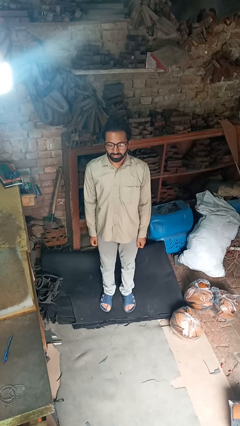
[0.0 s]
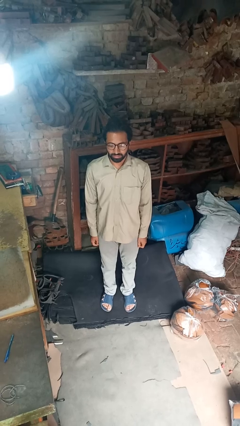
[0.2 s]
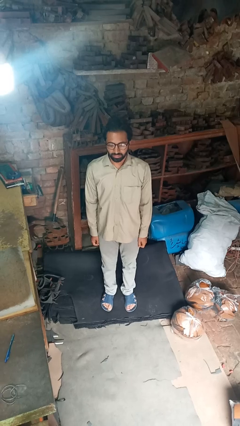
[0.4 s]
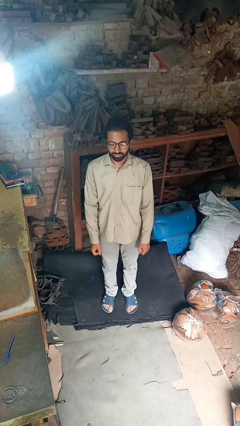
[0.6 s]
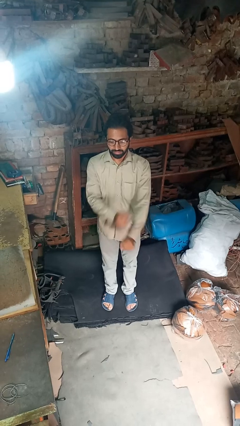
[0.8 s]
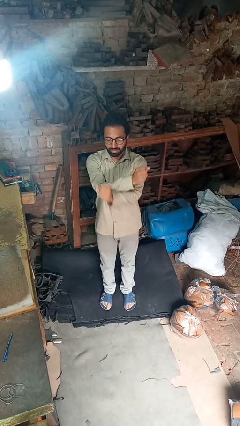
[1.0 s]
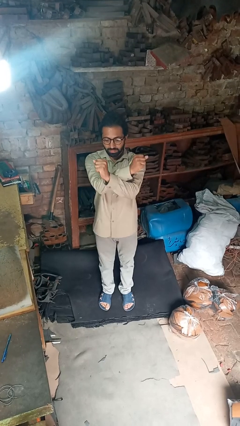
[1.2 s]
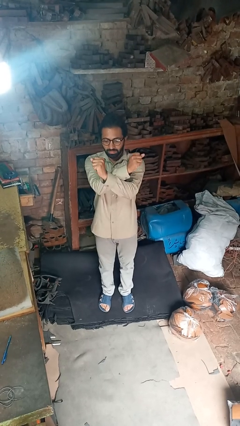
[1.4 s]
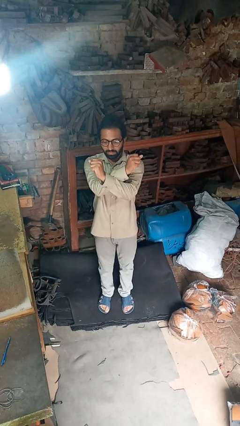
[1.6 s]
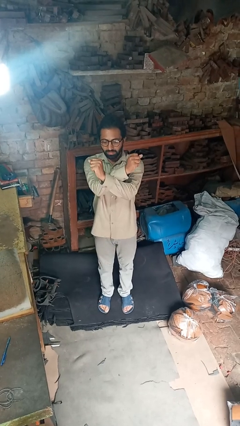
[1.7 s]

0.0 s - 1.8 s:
person crosses arms

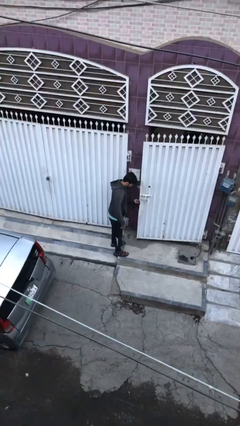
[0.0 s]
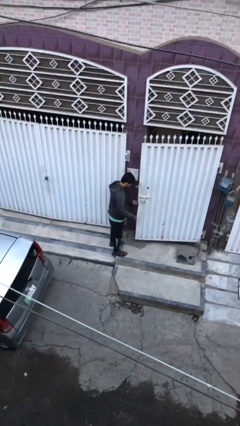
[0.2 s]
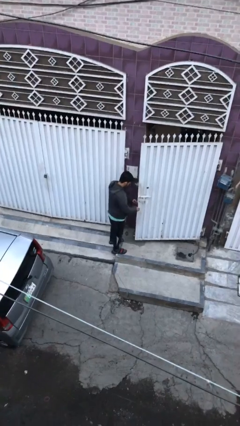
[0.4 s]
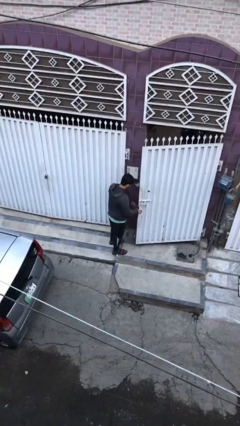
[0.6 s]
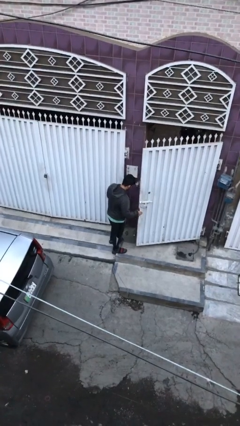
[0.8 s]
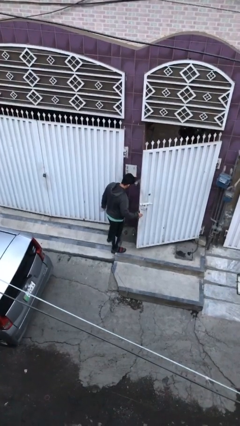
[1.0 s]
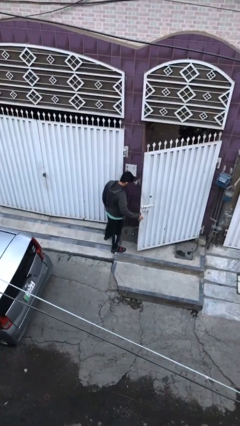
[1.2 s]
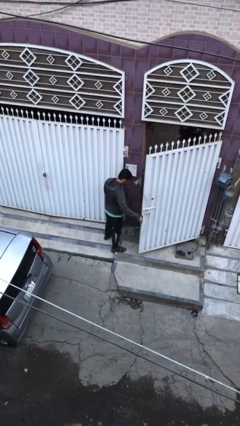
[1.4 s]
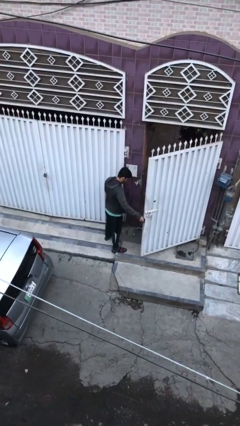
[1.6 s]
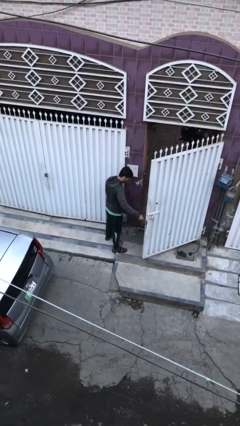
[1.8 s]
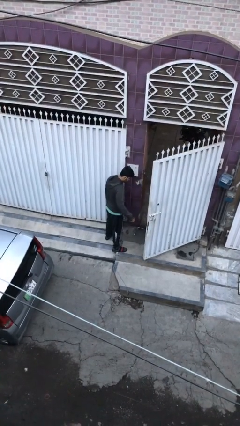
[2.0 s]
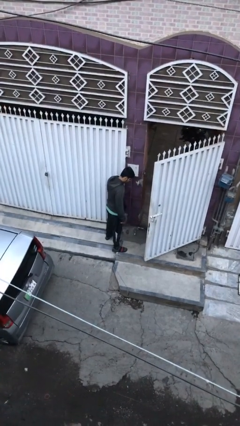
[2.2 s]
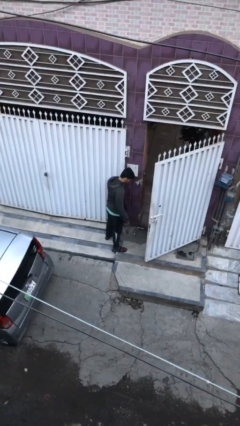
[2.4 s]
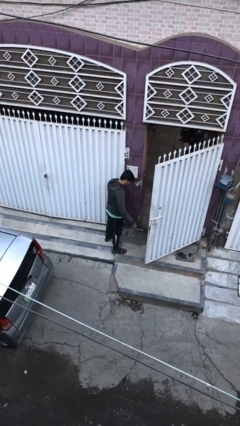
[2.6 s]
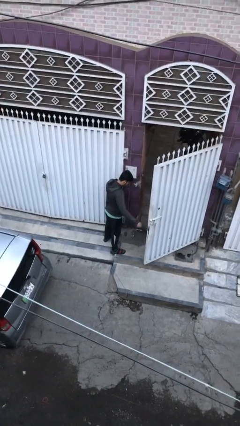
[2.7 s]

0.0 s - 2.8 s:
person opens facility door

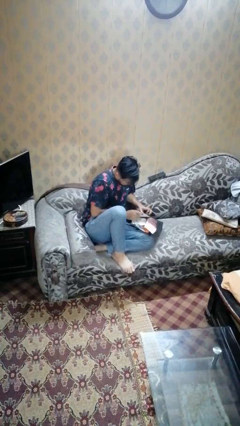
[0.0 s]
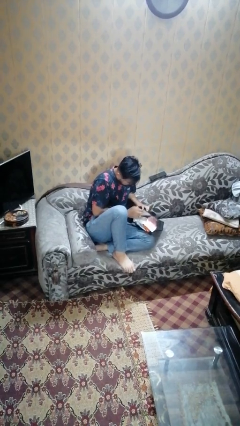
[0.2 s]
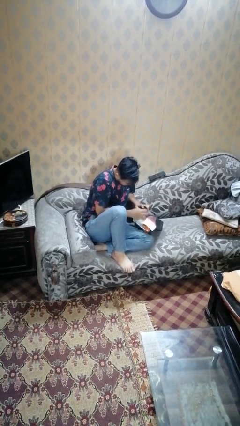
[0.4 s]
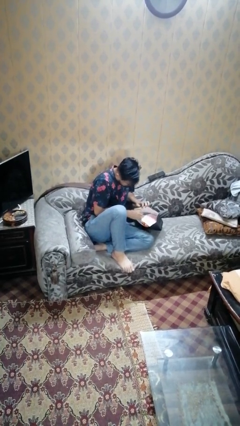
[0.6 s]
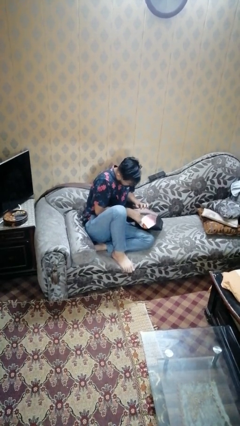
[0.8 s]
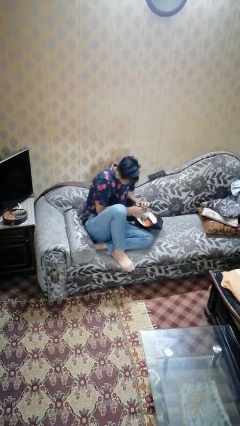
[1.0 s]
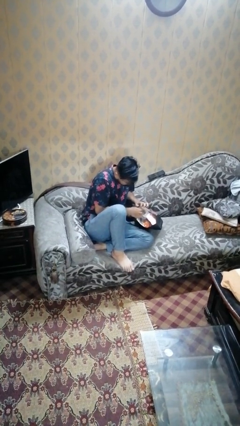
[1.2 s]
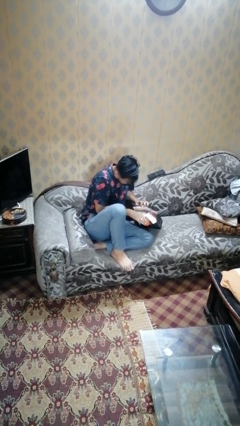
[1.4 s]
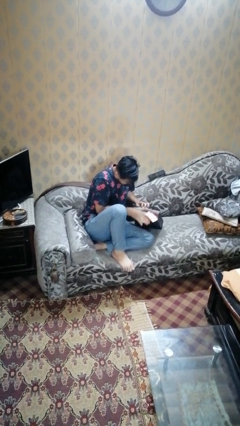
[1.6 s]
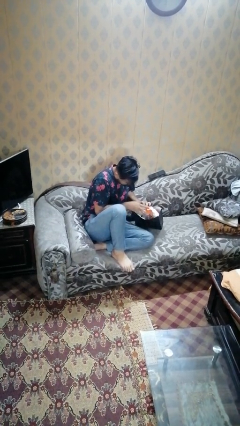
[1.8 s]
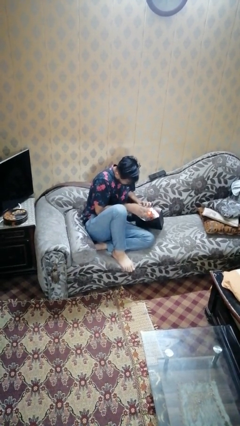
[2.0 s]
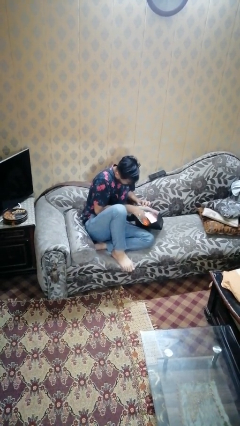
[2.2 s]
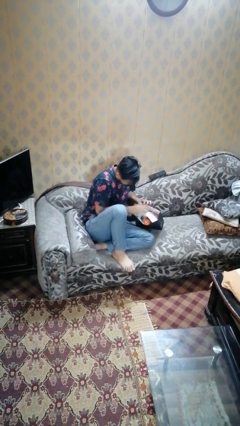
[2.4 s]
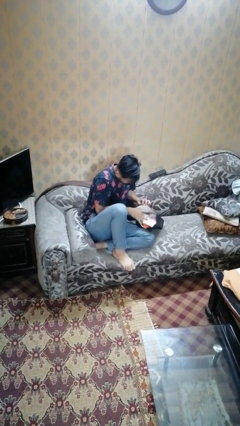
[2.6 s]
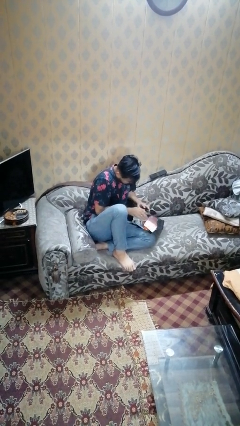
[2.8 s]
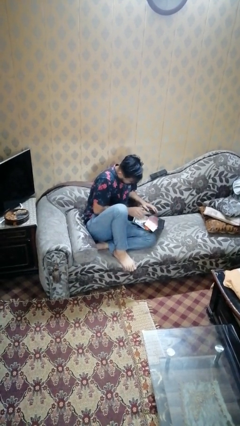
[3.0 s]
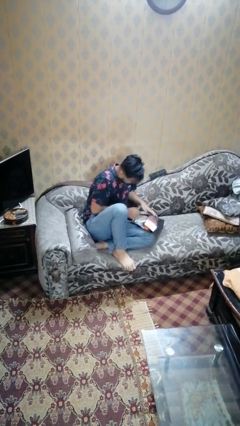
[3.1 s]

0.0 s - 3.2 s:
person searches in bag

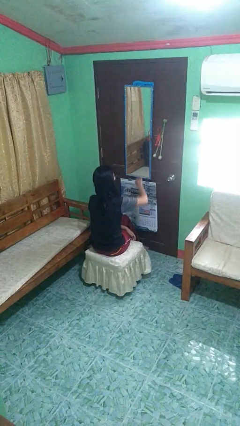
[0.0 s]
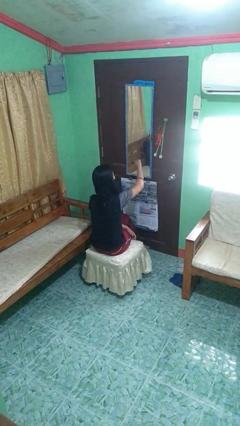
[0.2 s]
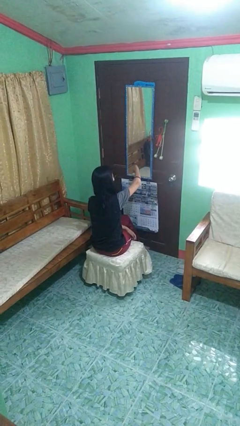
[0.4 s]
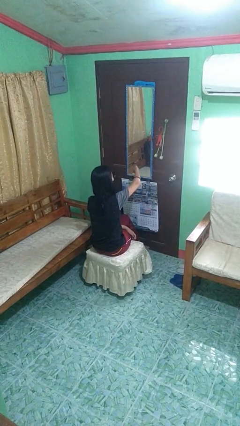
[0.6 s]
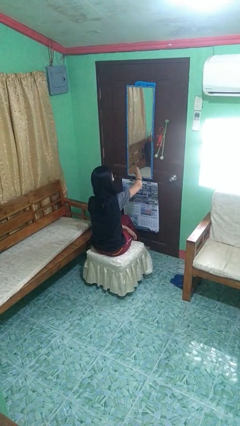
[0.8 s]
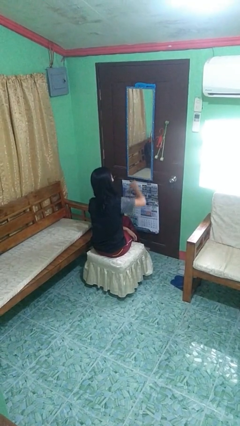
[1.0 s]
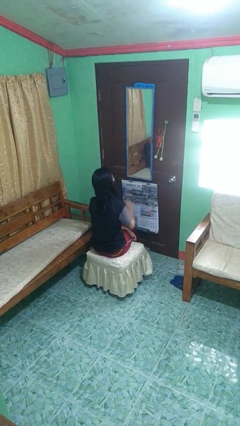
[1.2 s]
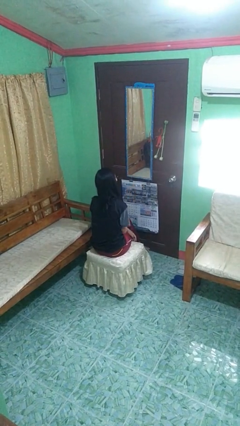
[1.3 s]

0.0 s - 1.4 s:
person gestures thumbs down

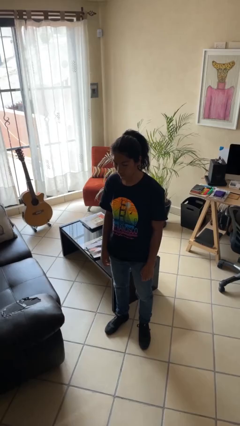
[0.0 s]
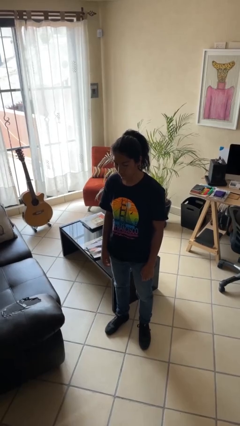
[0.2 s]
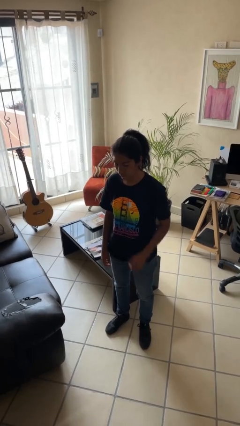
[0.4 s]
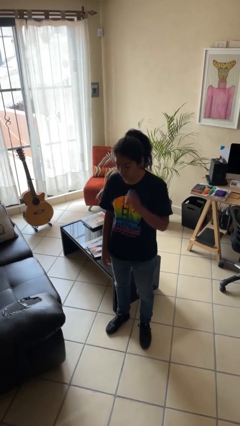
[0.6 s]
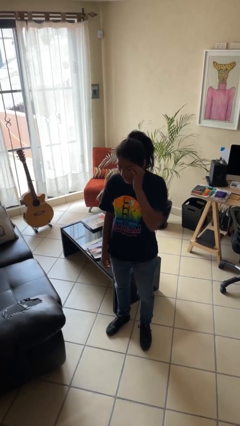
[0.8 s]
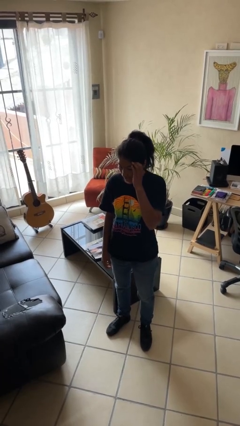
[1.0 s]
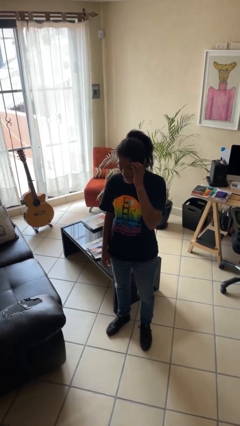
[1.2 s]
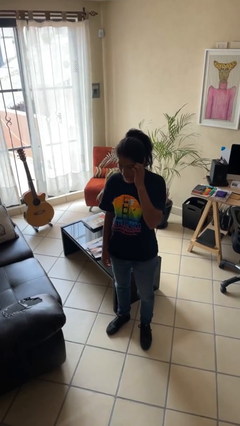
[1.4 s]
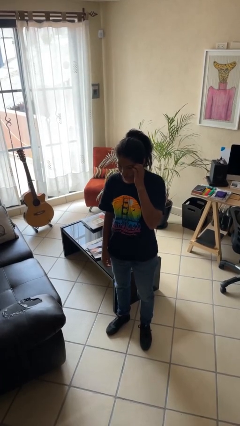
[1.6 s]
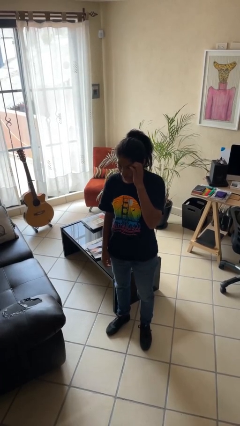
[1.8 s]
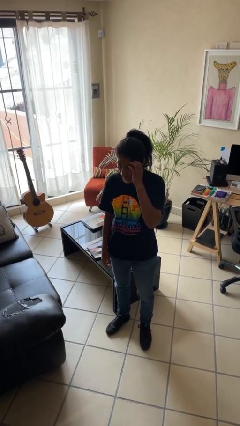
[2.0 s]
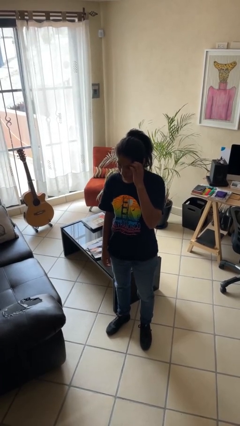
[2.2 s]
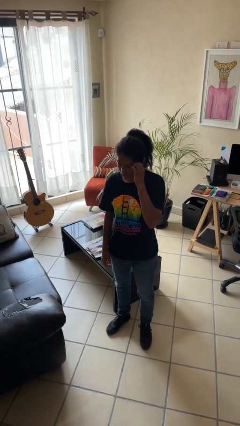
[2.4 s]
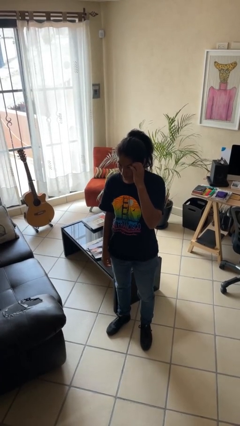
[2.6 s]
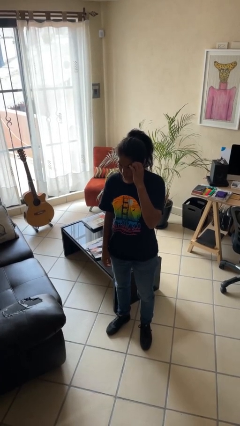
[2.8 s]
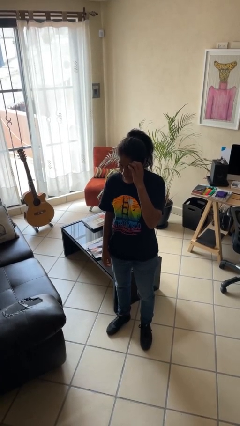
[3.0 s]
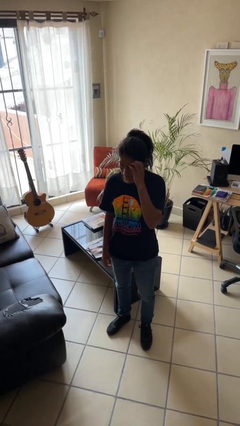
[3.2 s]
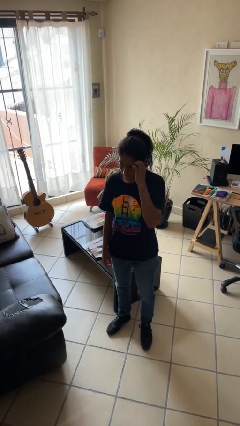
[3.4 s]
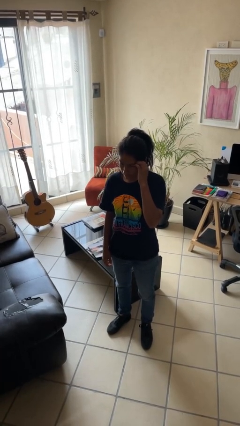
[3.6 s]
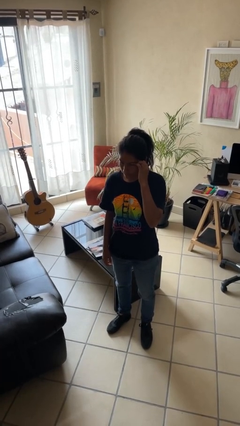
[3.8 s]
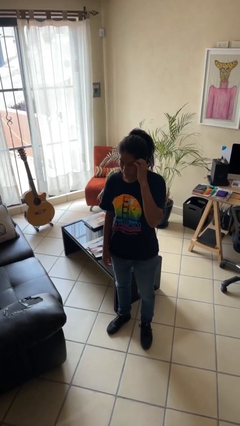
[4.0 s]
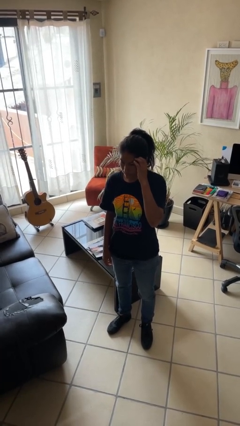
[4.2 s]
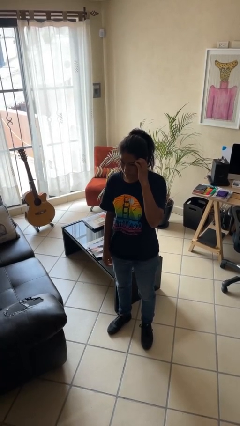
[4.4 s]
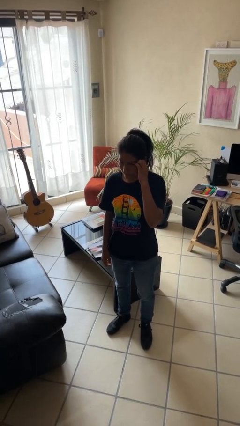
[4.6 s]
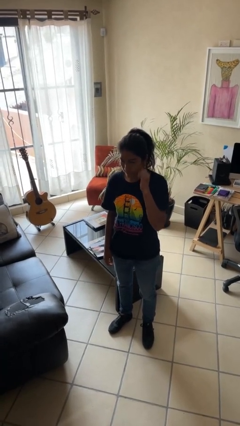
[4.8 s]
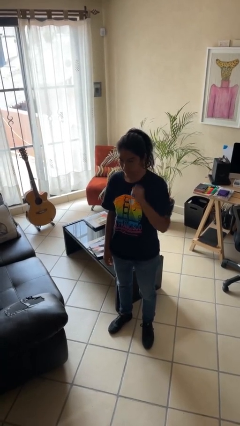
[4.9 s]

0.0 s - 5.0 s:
person scratches face

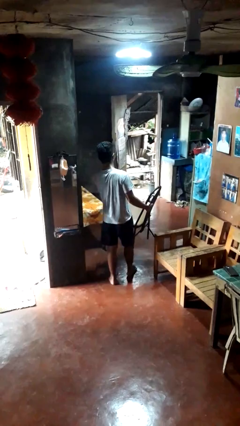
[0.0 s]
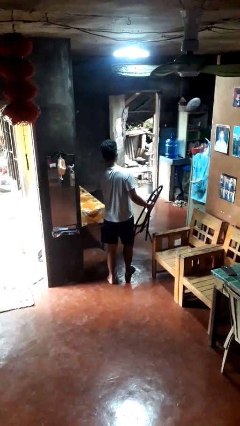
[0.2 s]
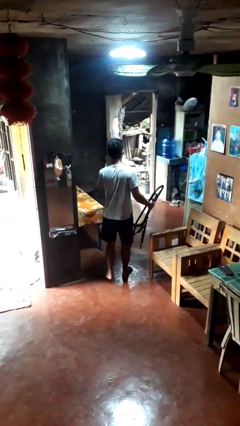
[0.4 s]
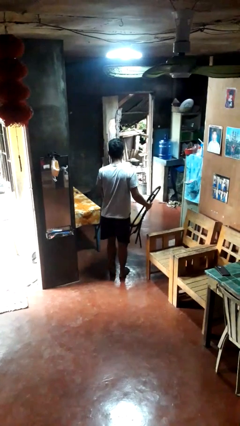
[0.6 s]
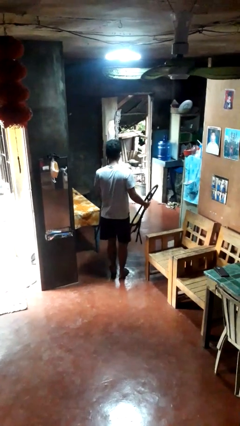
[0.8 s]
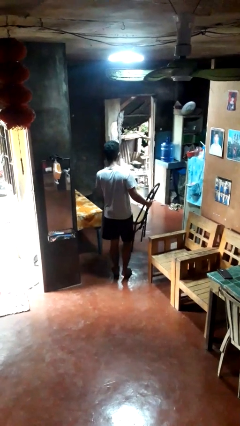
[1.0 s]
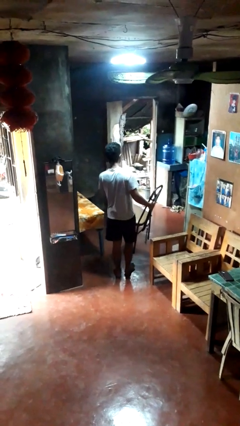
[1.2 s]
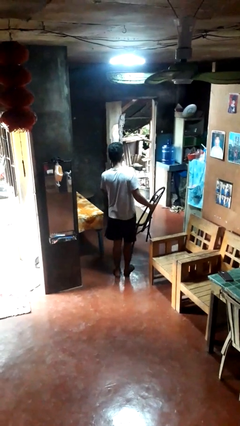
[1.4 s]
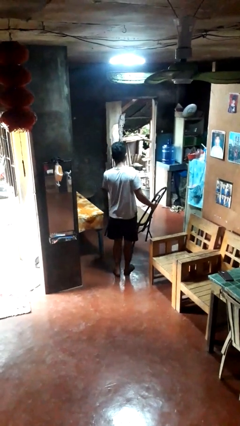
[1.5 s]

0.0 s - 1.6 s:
person carries furniture

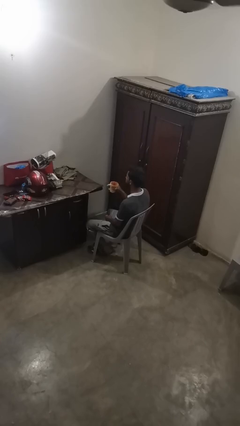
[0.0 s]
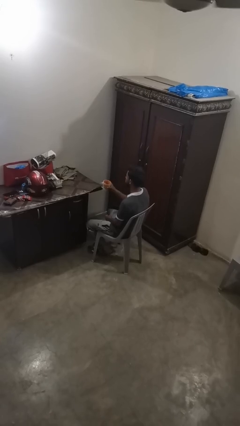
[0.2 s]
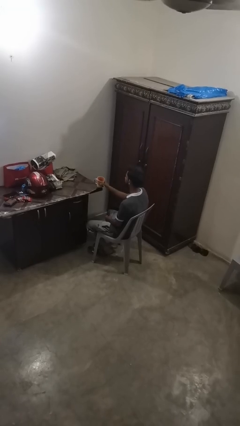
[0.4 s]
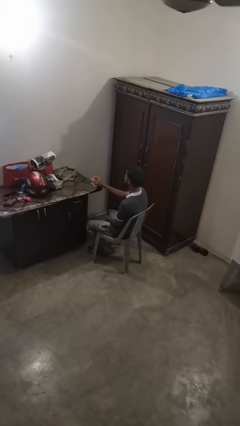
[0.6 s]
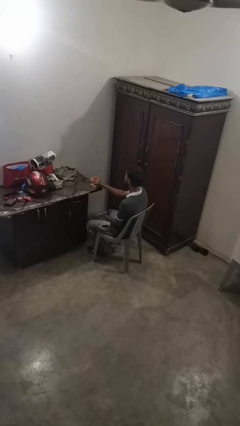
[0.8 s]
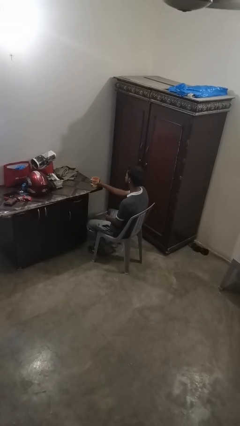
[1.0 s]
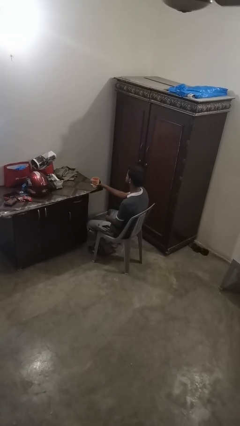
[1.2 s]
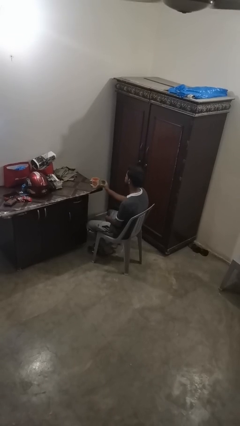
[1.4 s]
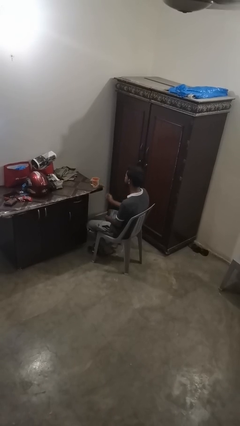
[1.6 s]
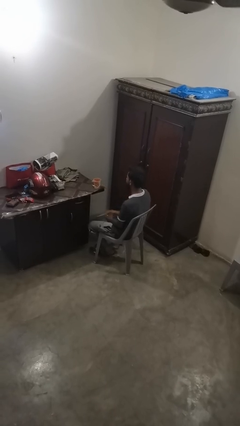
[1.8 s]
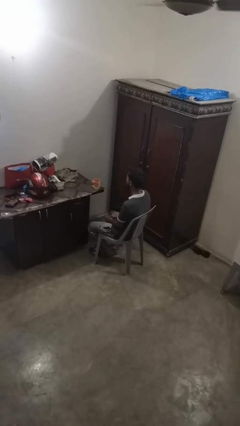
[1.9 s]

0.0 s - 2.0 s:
person puts down object on table
